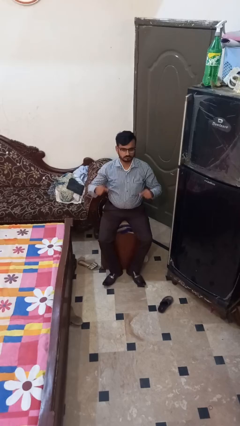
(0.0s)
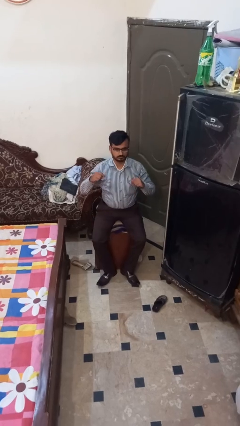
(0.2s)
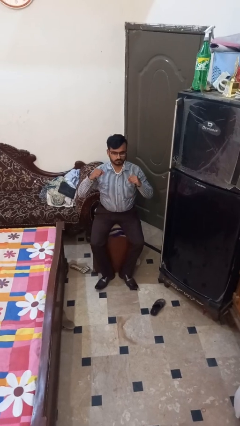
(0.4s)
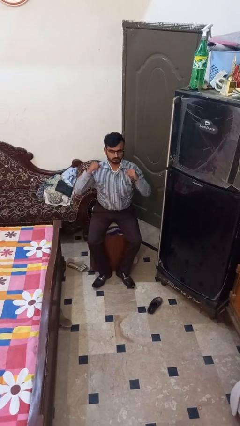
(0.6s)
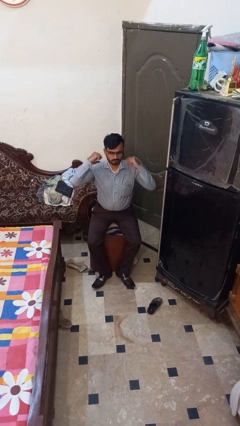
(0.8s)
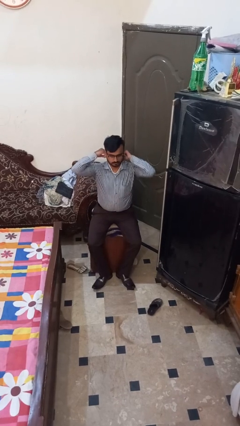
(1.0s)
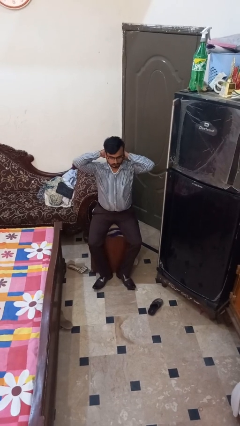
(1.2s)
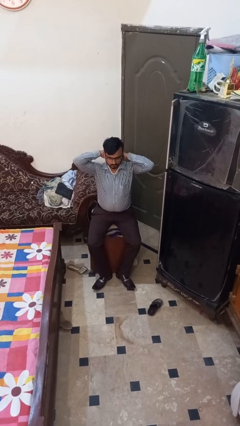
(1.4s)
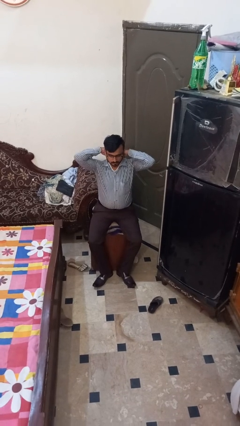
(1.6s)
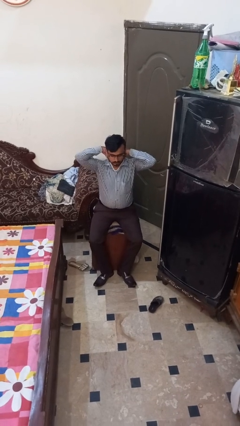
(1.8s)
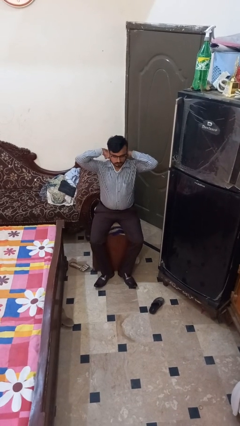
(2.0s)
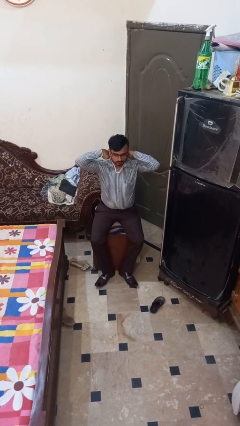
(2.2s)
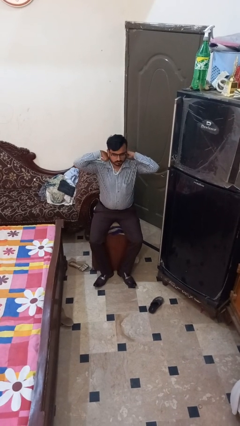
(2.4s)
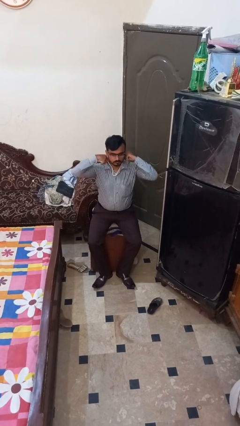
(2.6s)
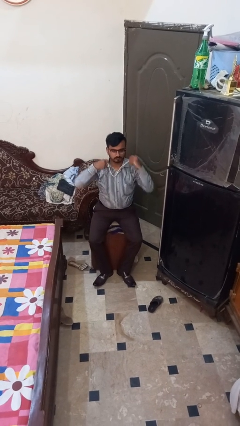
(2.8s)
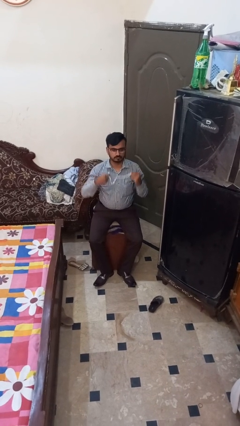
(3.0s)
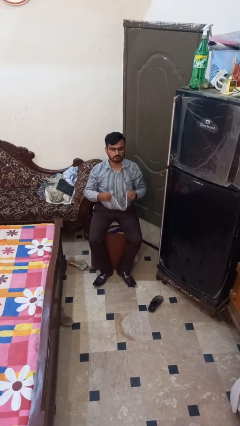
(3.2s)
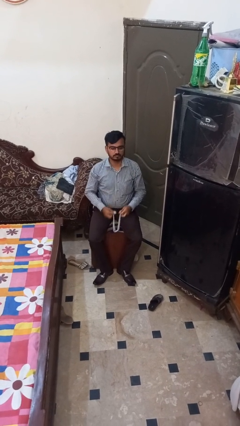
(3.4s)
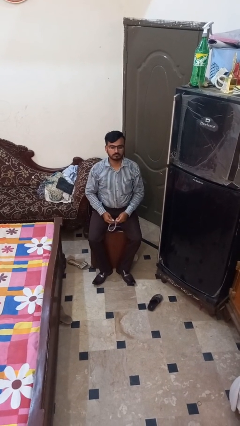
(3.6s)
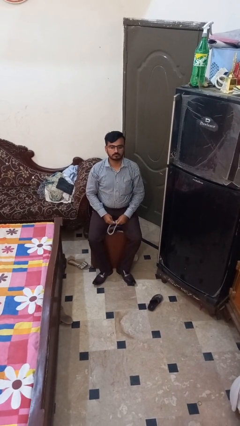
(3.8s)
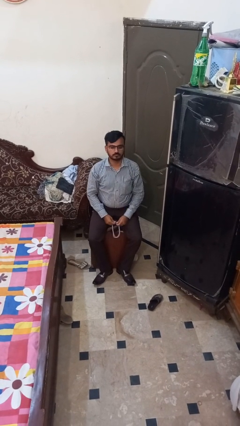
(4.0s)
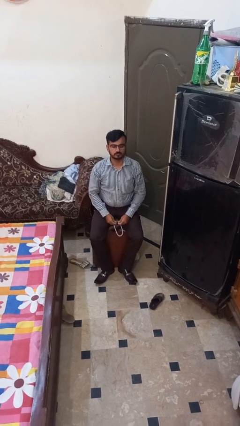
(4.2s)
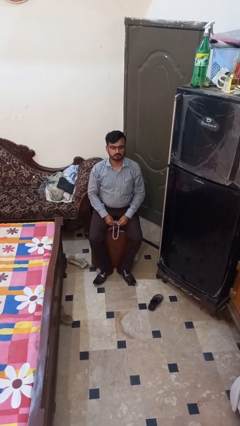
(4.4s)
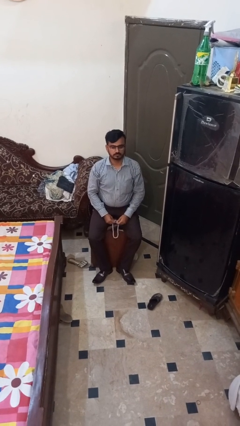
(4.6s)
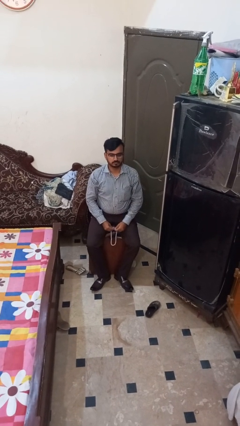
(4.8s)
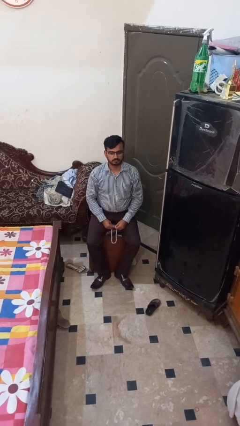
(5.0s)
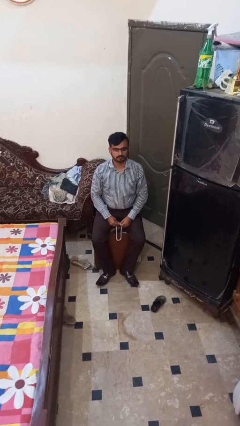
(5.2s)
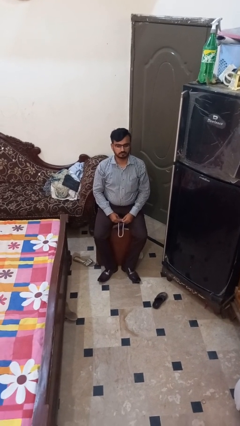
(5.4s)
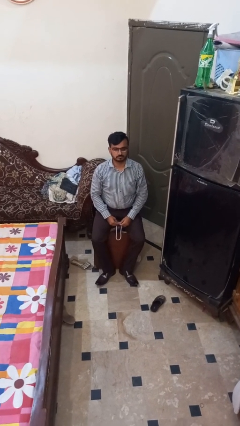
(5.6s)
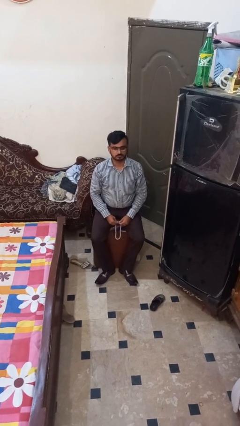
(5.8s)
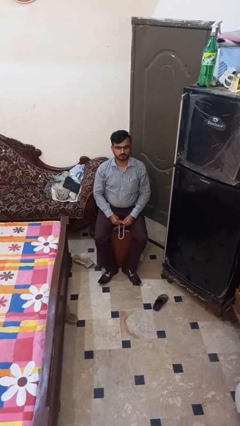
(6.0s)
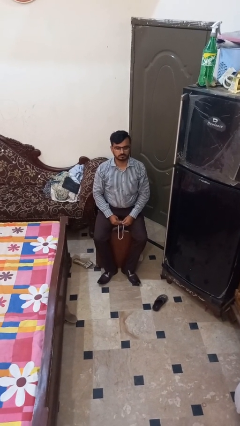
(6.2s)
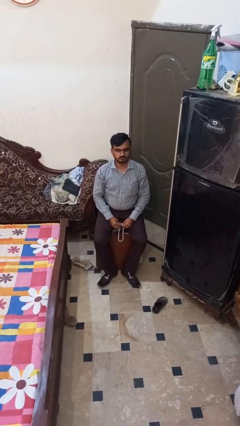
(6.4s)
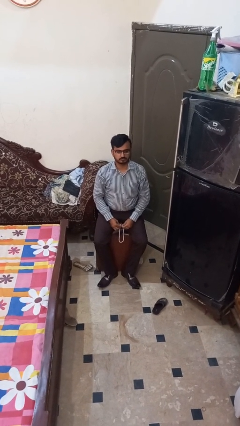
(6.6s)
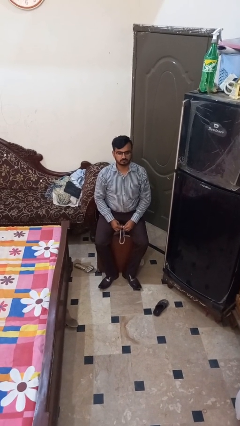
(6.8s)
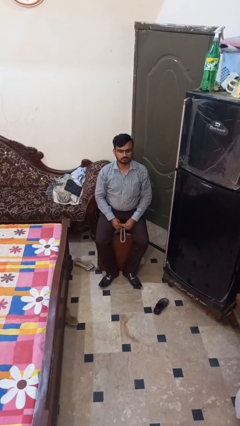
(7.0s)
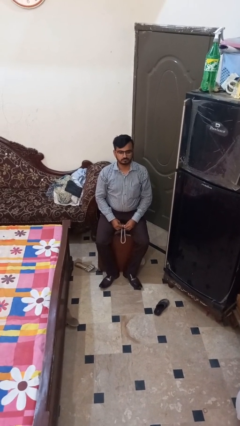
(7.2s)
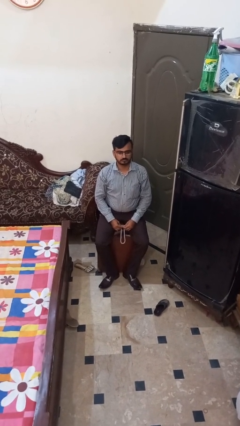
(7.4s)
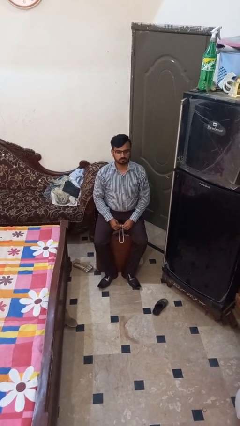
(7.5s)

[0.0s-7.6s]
person takes off necklace

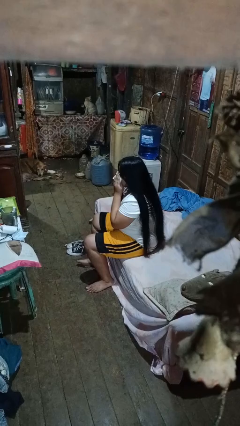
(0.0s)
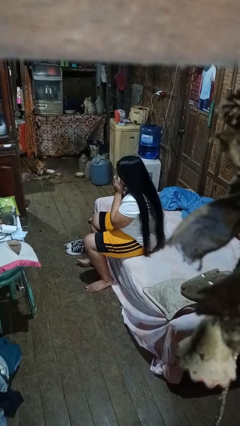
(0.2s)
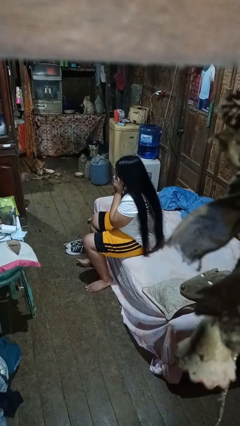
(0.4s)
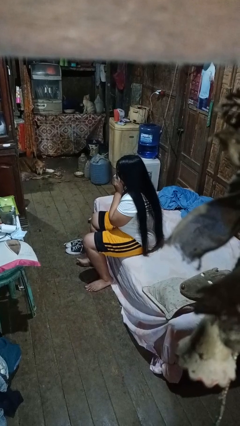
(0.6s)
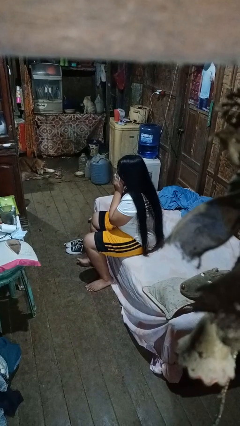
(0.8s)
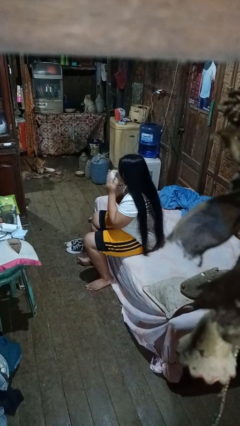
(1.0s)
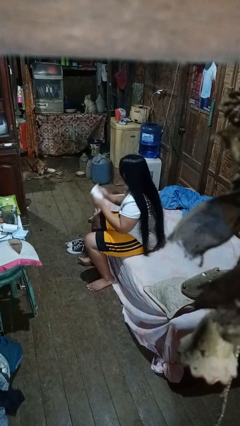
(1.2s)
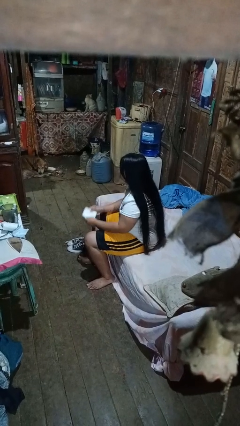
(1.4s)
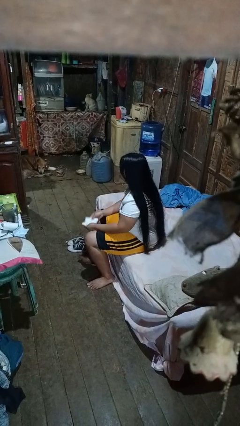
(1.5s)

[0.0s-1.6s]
person blows nose

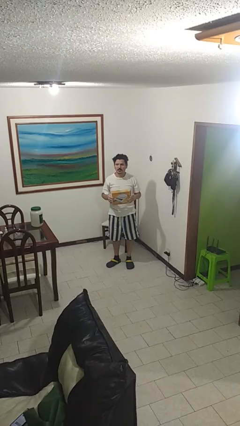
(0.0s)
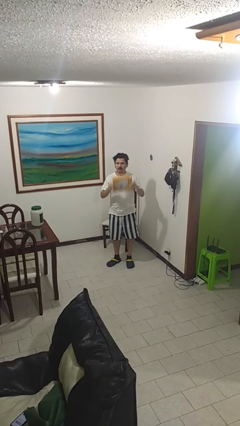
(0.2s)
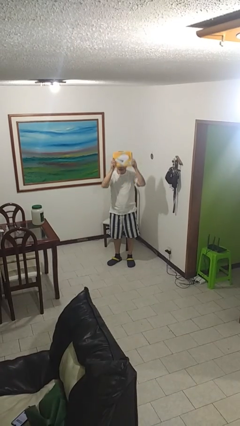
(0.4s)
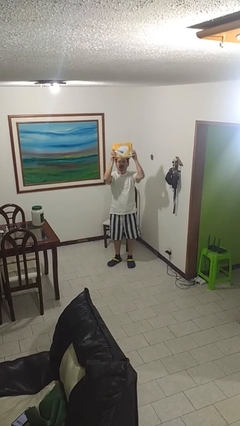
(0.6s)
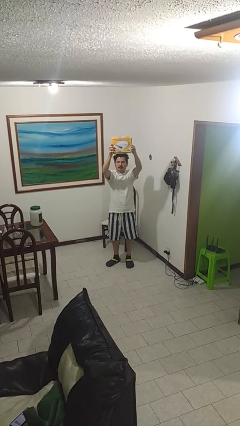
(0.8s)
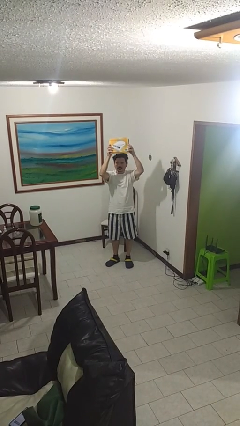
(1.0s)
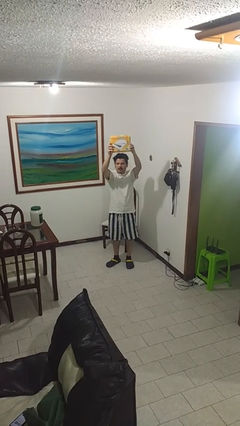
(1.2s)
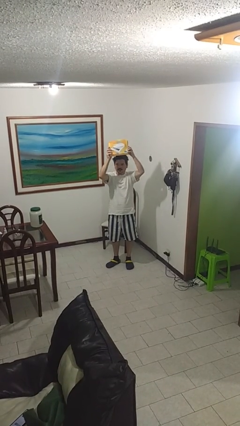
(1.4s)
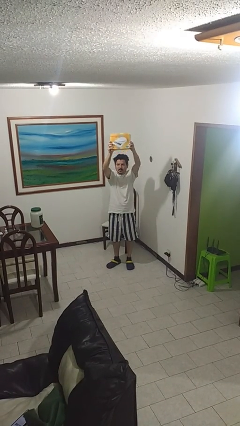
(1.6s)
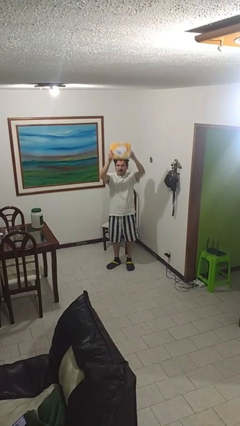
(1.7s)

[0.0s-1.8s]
person holds object above head

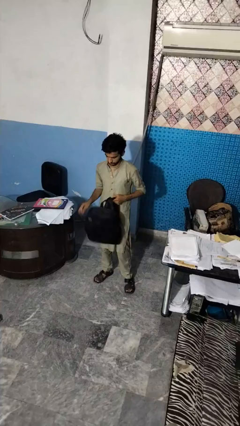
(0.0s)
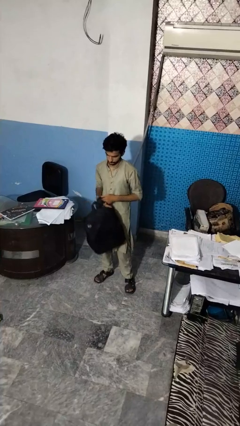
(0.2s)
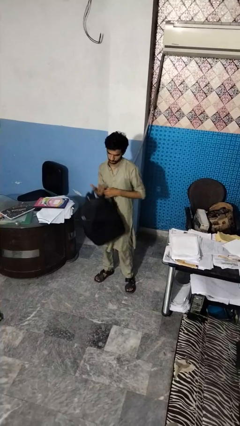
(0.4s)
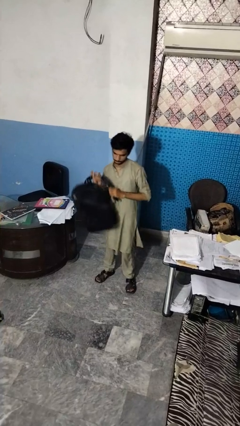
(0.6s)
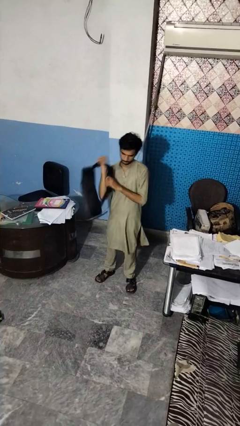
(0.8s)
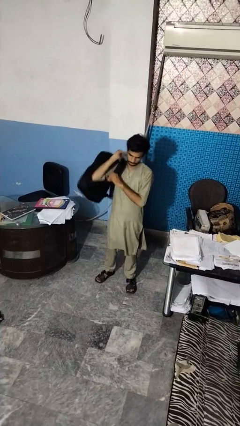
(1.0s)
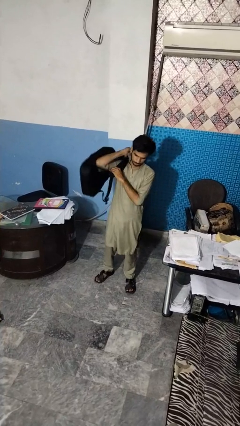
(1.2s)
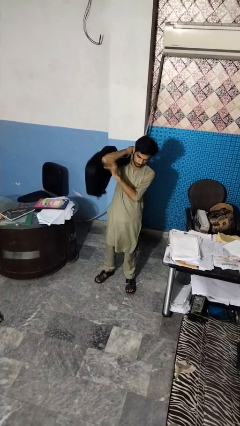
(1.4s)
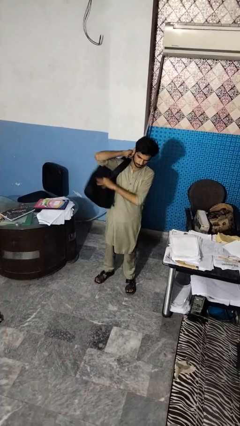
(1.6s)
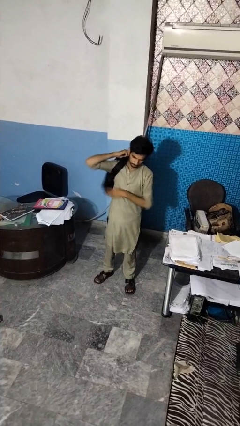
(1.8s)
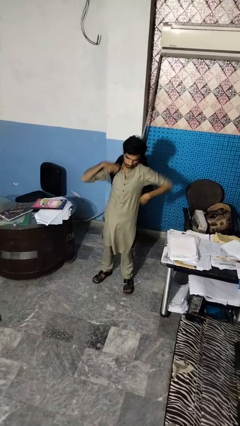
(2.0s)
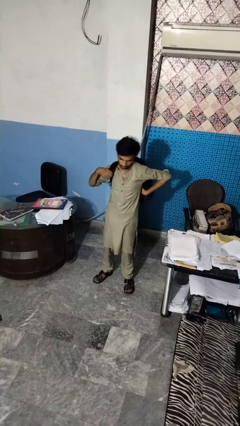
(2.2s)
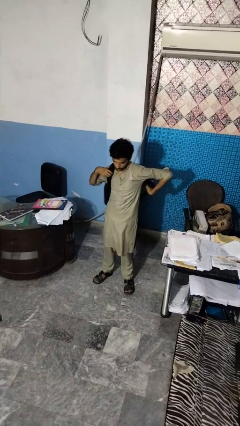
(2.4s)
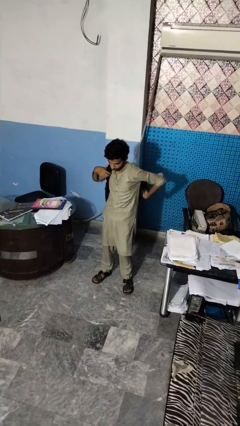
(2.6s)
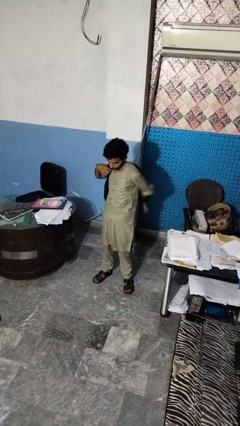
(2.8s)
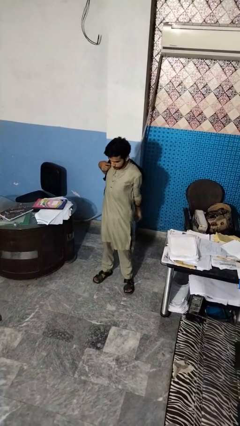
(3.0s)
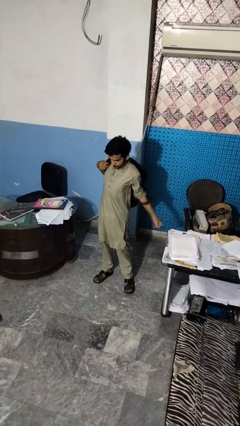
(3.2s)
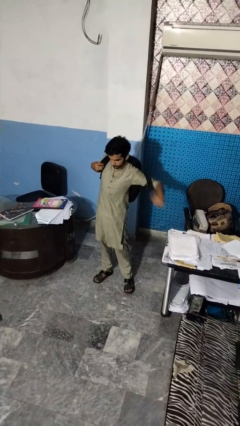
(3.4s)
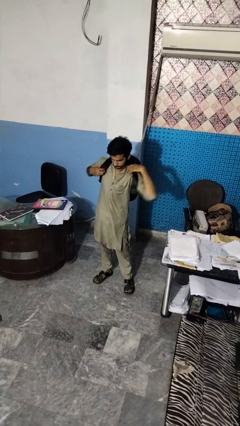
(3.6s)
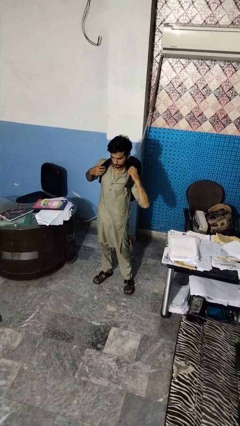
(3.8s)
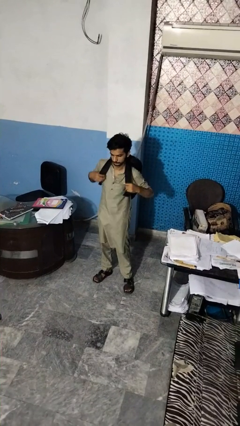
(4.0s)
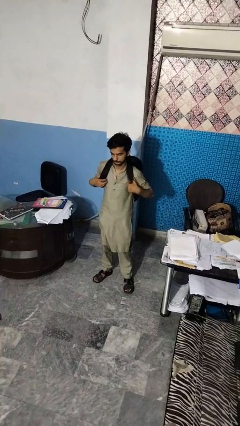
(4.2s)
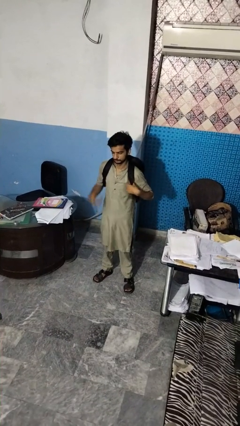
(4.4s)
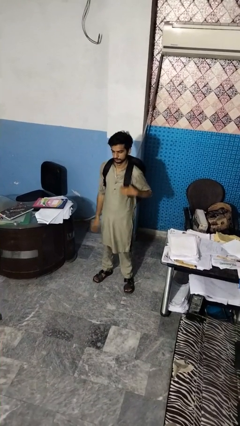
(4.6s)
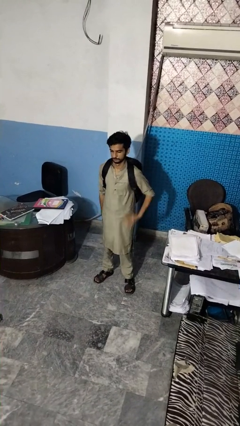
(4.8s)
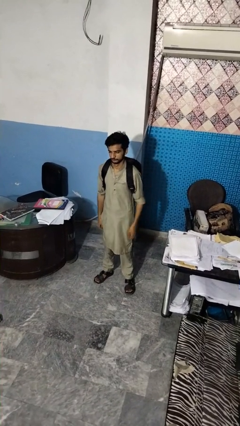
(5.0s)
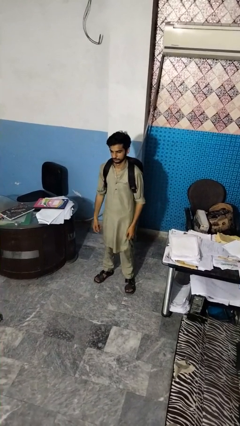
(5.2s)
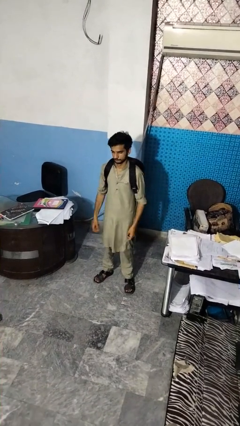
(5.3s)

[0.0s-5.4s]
person puts on backpack

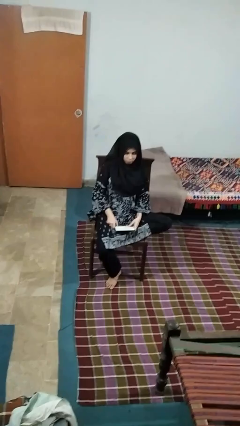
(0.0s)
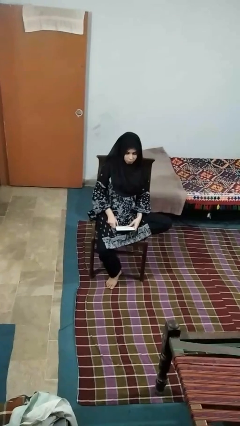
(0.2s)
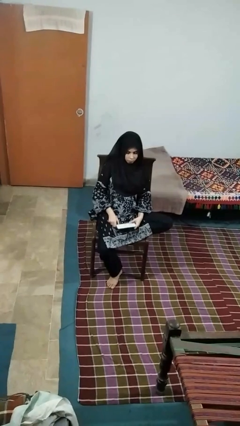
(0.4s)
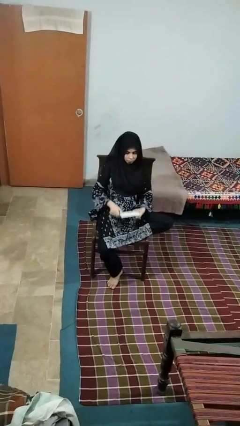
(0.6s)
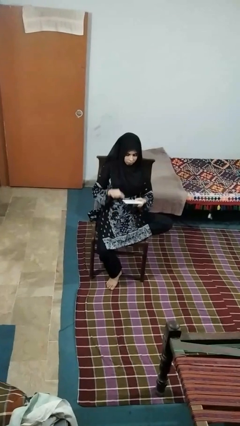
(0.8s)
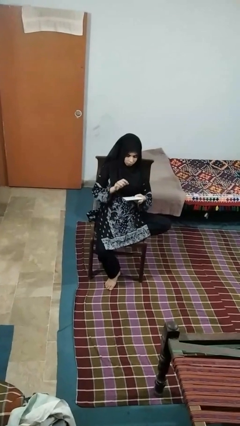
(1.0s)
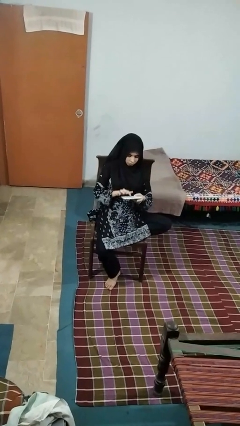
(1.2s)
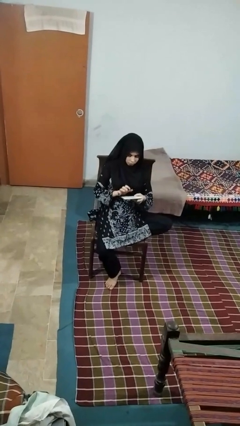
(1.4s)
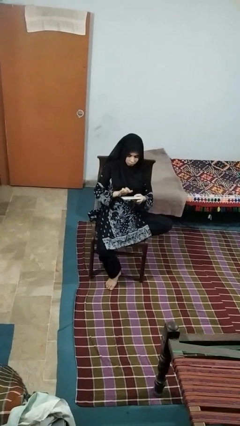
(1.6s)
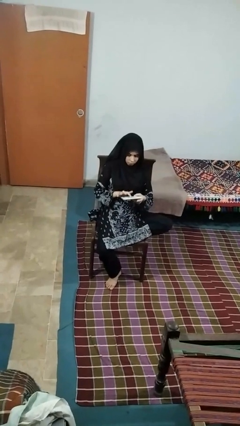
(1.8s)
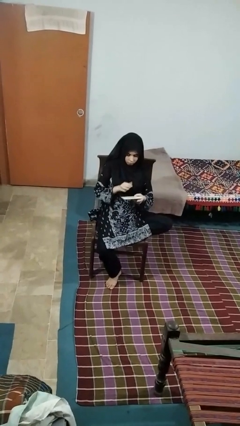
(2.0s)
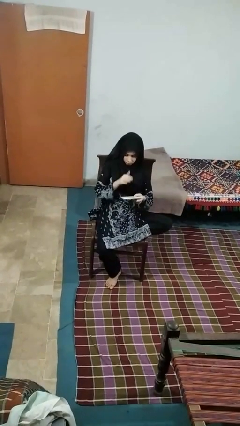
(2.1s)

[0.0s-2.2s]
person taps object with finger
